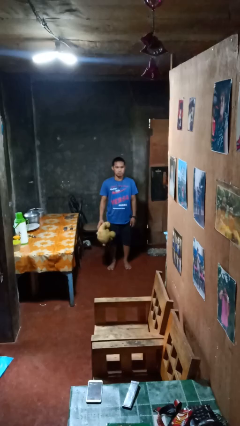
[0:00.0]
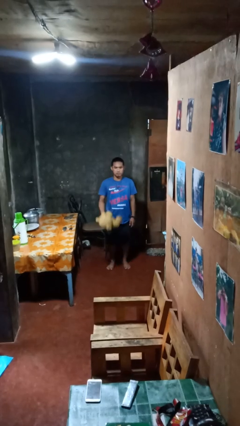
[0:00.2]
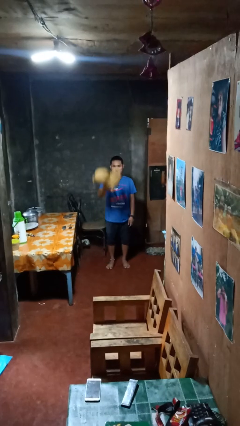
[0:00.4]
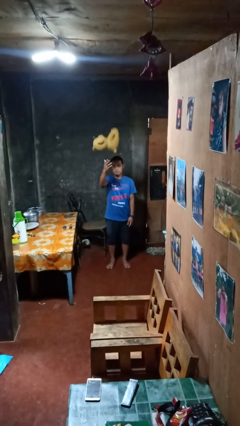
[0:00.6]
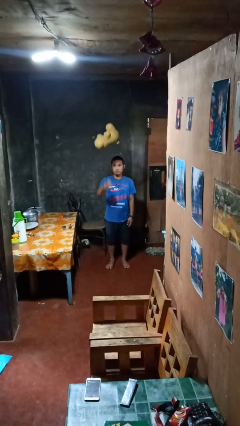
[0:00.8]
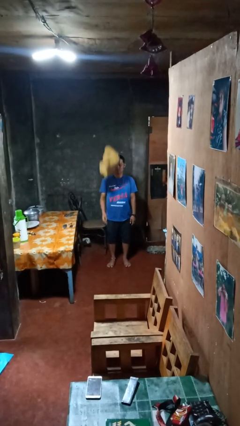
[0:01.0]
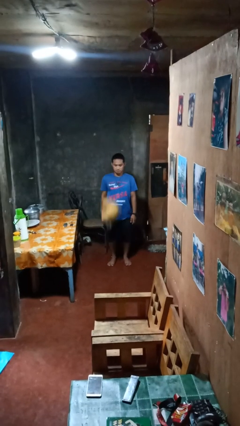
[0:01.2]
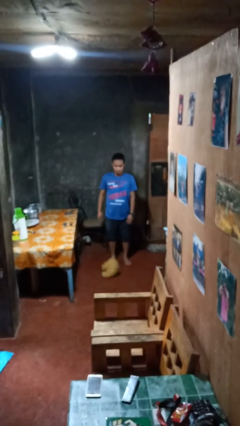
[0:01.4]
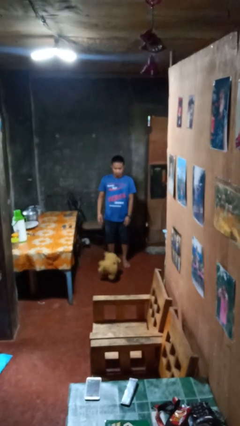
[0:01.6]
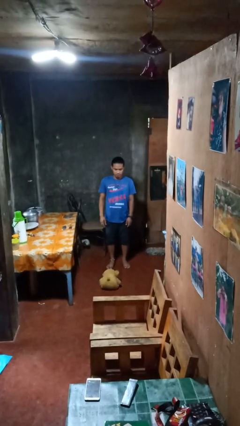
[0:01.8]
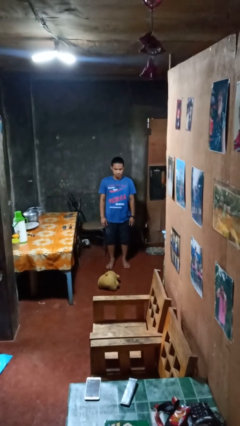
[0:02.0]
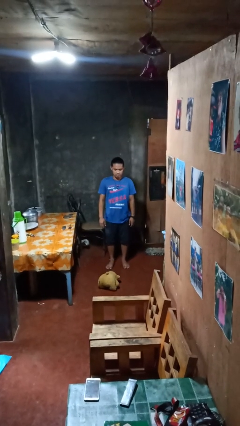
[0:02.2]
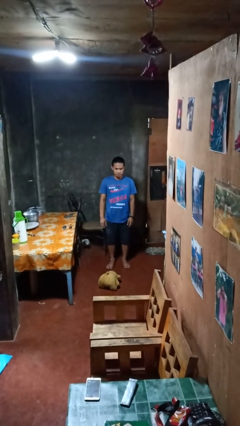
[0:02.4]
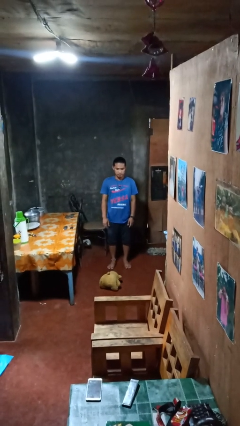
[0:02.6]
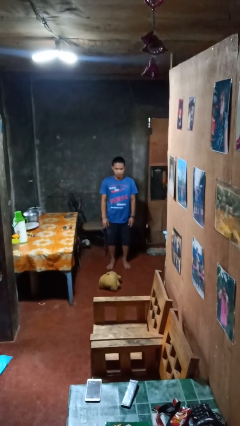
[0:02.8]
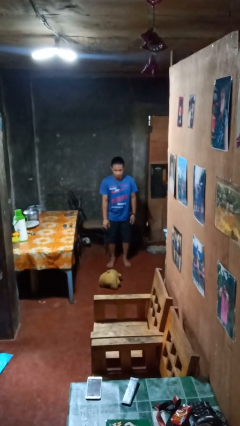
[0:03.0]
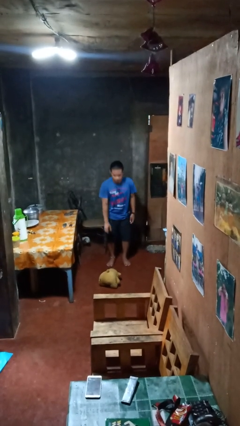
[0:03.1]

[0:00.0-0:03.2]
person throws object into air

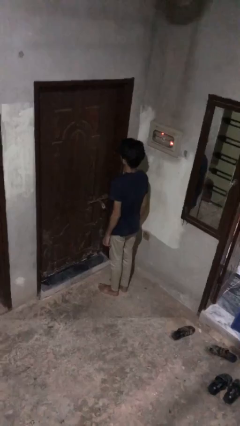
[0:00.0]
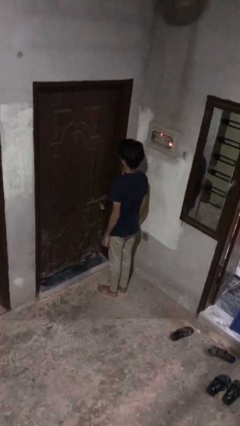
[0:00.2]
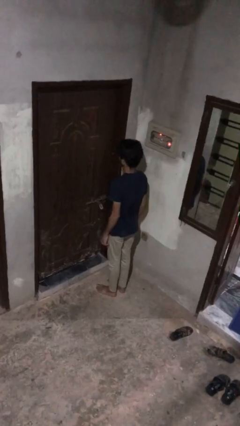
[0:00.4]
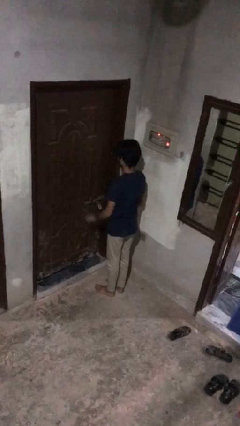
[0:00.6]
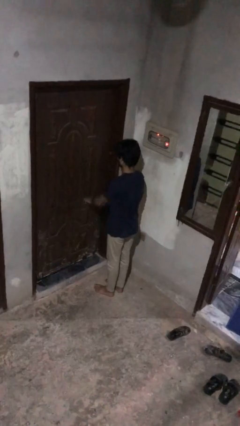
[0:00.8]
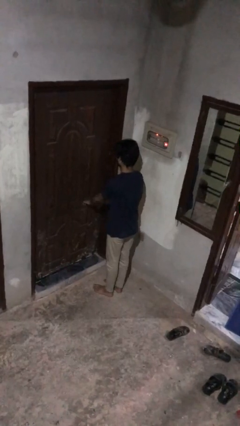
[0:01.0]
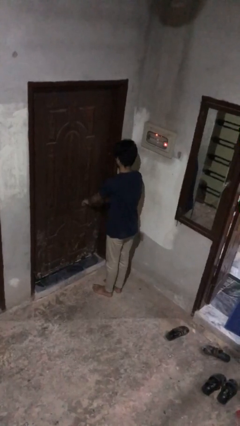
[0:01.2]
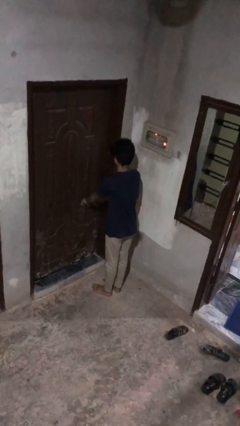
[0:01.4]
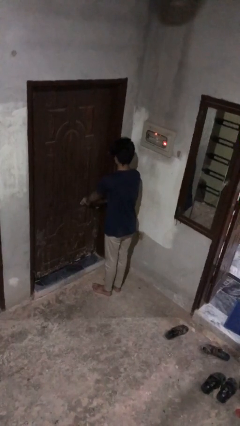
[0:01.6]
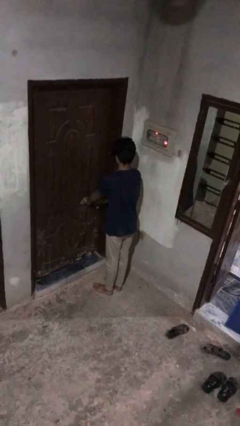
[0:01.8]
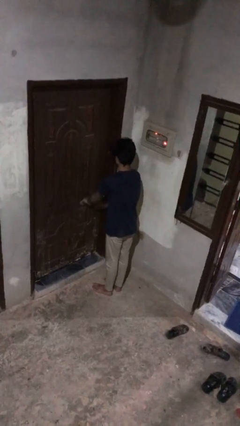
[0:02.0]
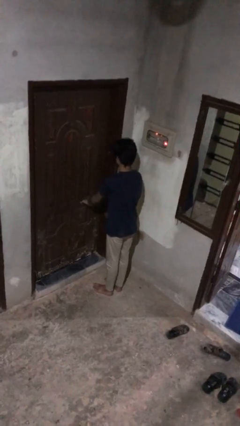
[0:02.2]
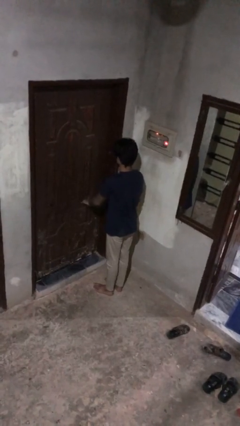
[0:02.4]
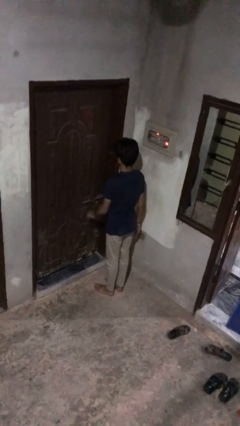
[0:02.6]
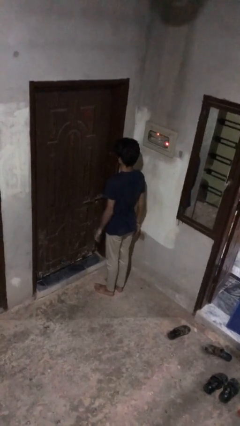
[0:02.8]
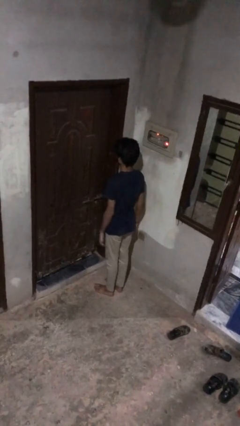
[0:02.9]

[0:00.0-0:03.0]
person unlocks door with keys

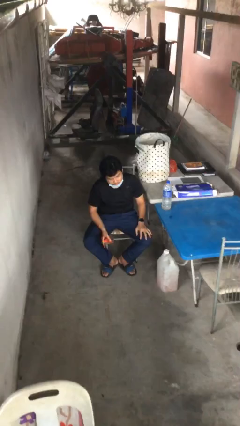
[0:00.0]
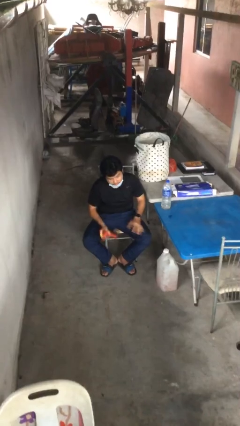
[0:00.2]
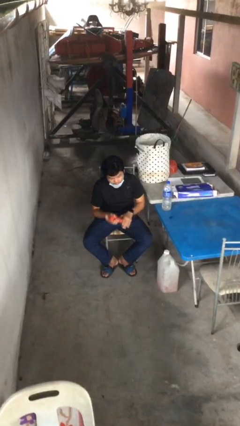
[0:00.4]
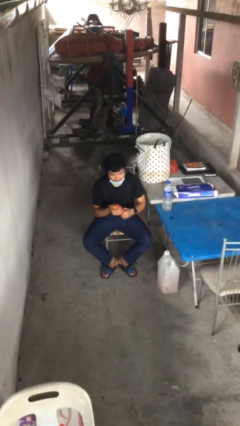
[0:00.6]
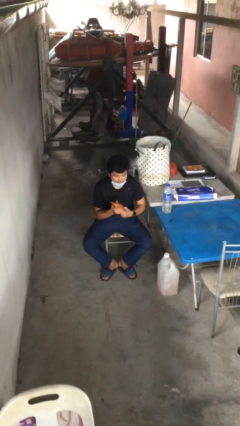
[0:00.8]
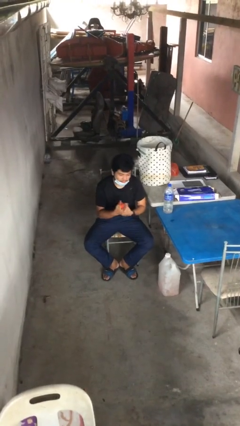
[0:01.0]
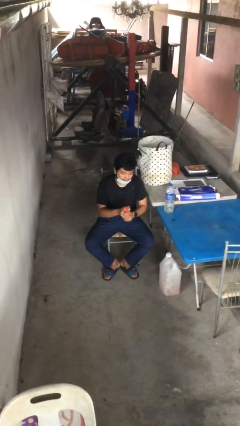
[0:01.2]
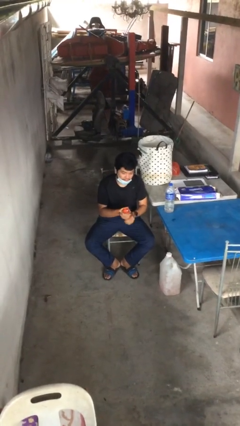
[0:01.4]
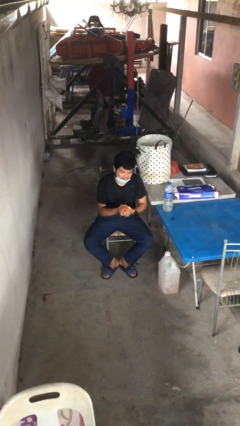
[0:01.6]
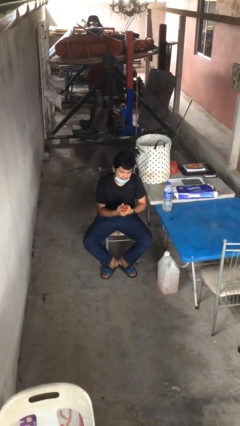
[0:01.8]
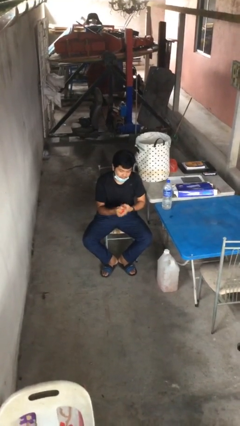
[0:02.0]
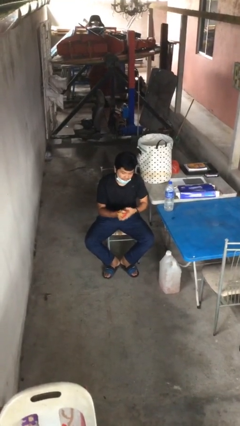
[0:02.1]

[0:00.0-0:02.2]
person squeezes object

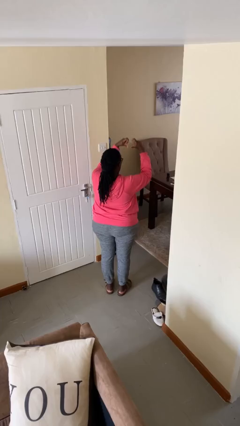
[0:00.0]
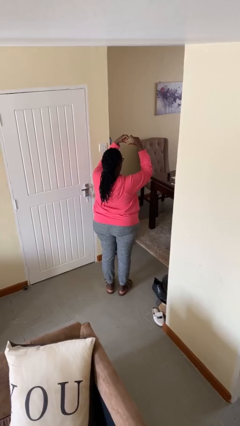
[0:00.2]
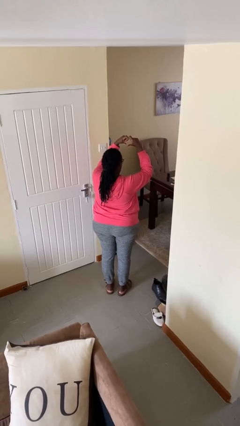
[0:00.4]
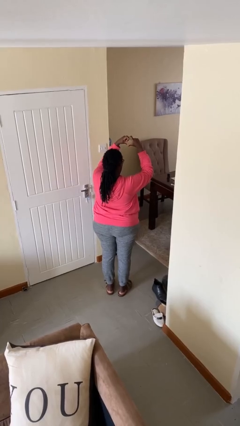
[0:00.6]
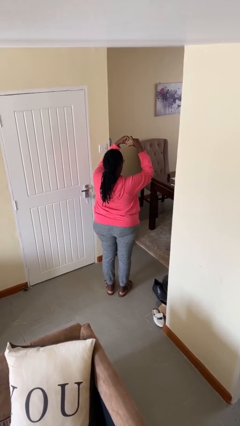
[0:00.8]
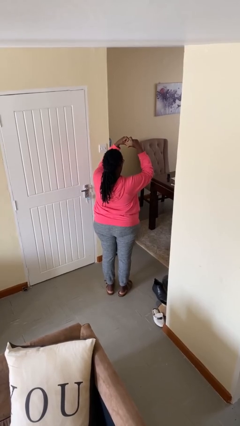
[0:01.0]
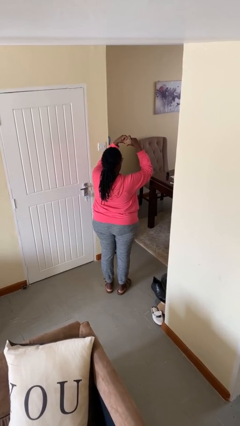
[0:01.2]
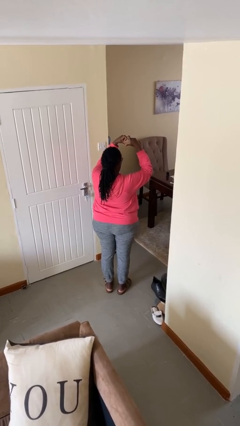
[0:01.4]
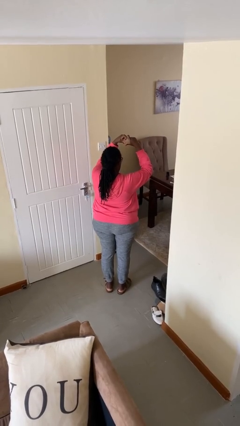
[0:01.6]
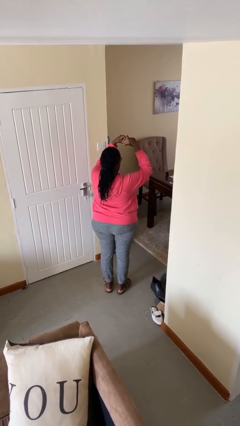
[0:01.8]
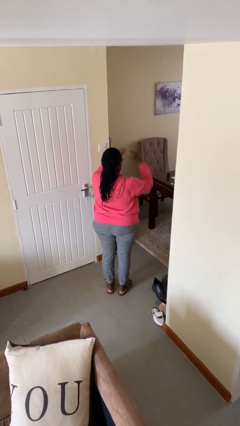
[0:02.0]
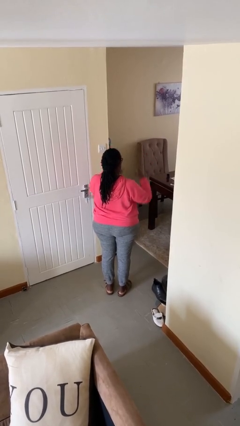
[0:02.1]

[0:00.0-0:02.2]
person gestures heart

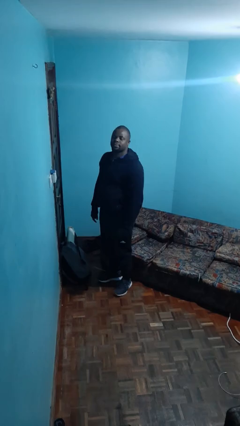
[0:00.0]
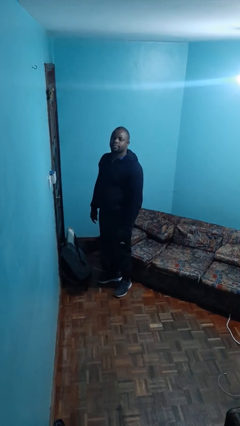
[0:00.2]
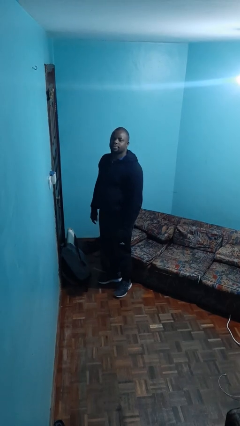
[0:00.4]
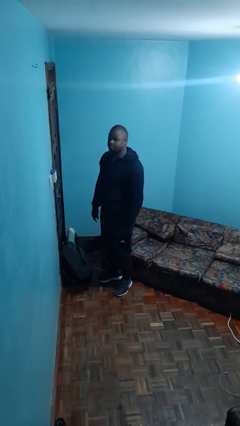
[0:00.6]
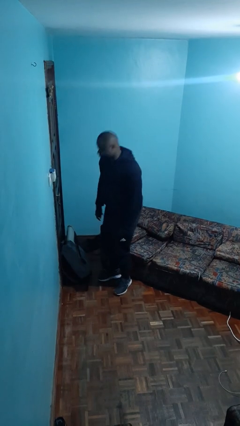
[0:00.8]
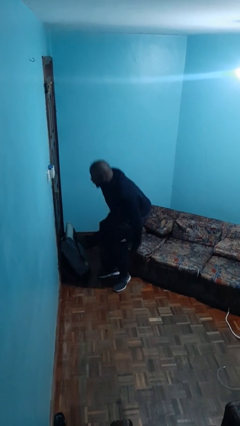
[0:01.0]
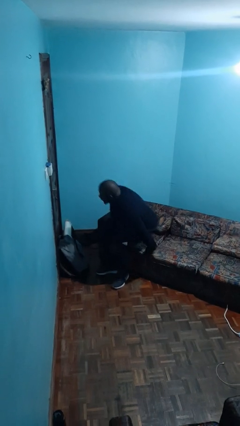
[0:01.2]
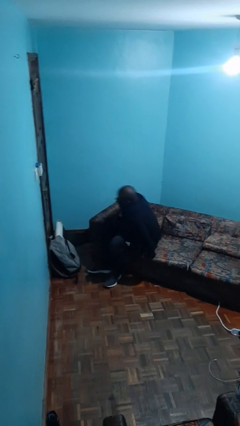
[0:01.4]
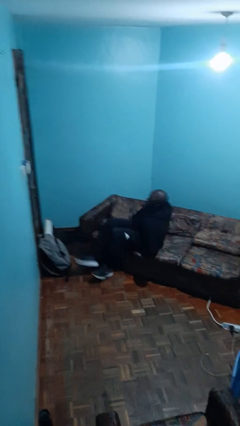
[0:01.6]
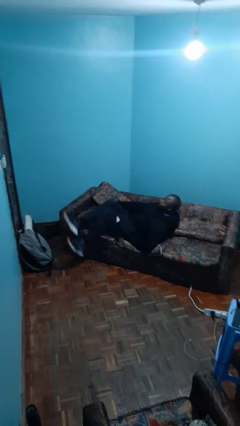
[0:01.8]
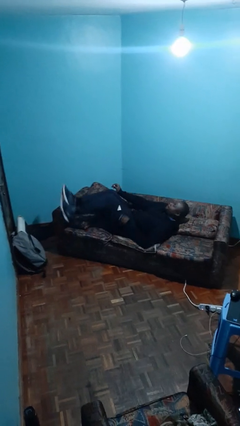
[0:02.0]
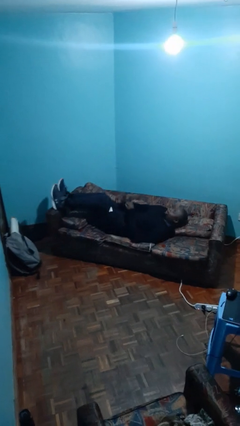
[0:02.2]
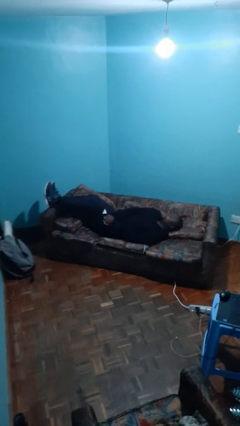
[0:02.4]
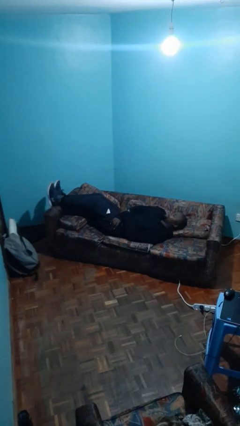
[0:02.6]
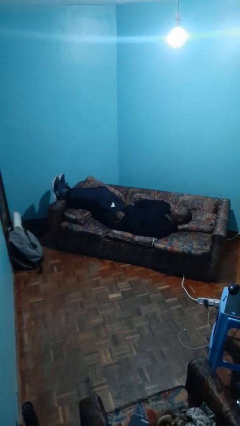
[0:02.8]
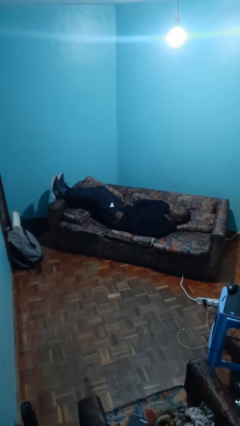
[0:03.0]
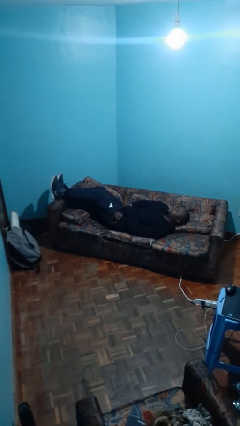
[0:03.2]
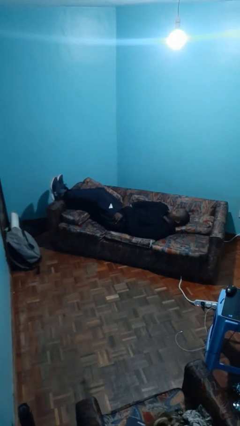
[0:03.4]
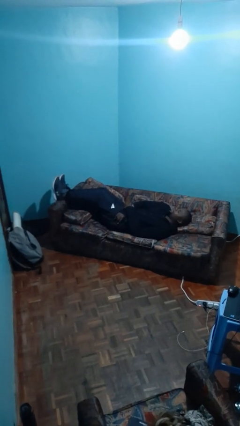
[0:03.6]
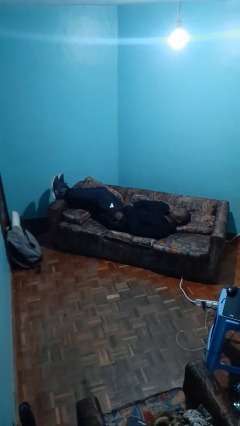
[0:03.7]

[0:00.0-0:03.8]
person lies down on couch

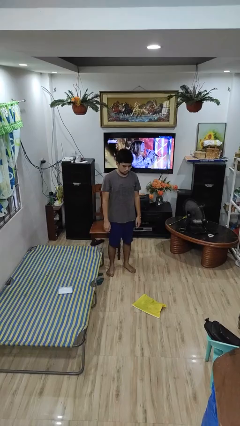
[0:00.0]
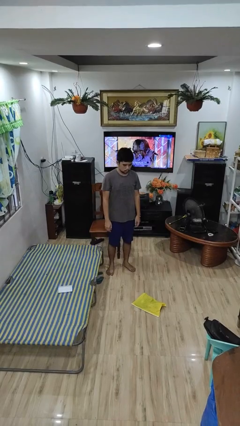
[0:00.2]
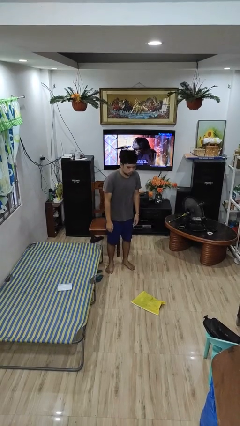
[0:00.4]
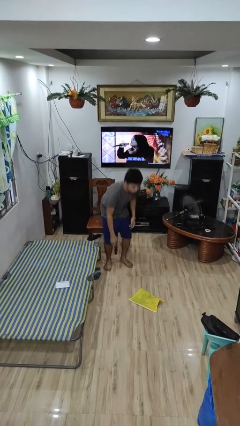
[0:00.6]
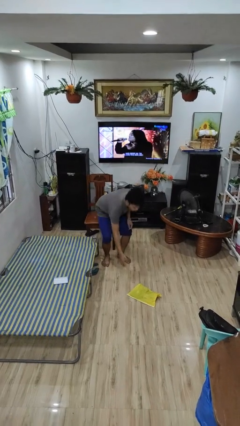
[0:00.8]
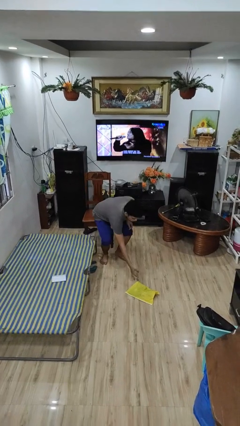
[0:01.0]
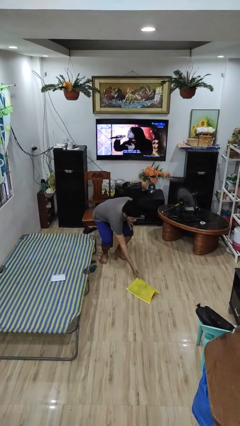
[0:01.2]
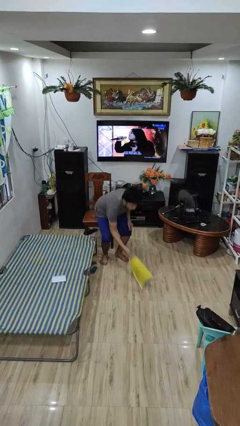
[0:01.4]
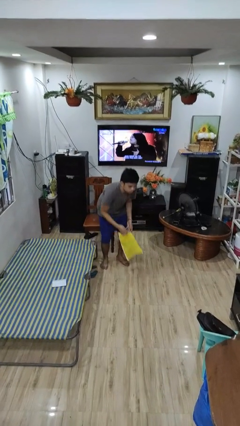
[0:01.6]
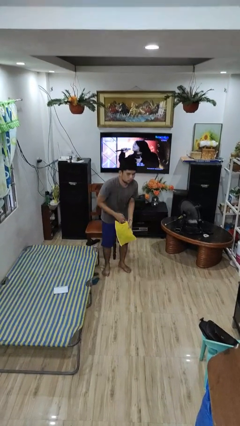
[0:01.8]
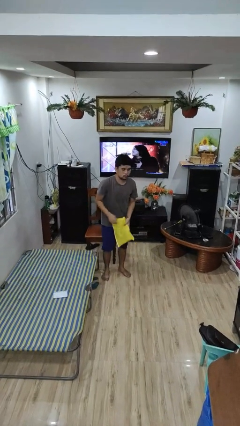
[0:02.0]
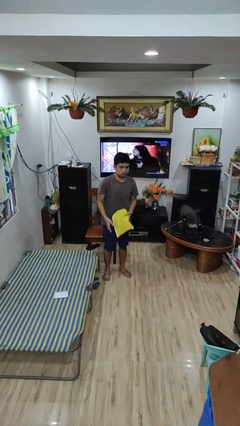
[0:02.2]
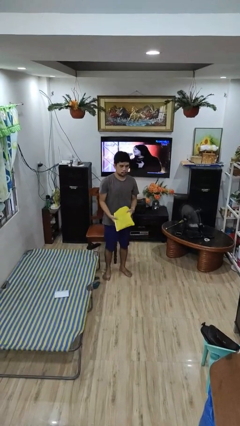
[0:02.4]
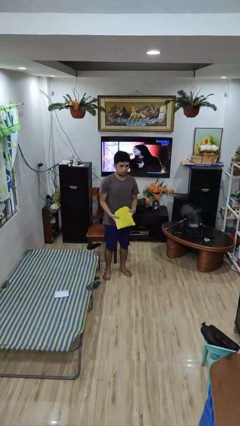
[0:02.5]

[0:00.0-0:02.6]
person picks up object from floor

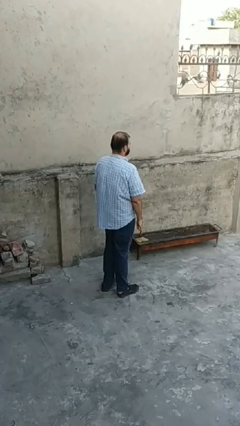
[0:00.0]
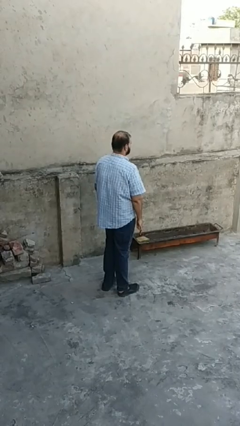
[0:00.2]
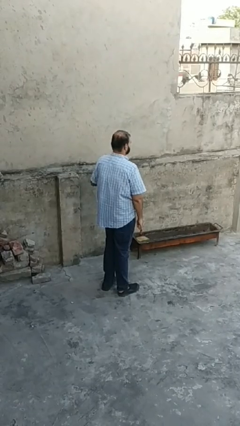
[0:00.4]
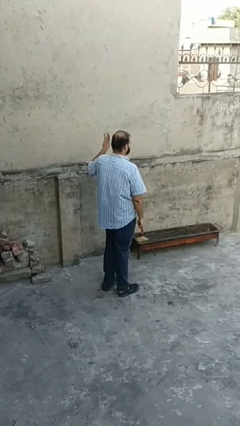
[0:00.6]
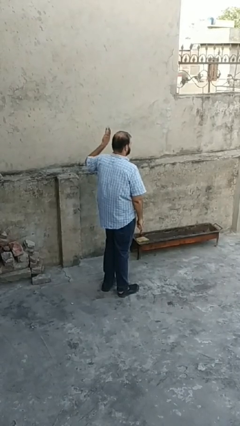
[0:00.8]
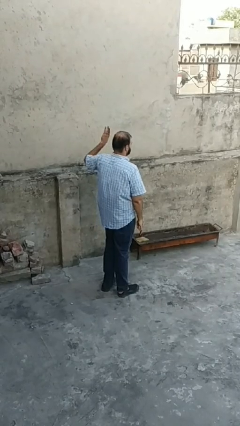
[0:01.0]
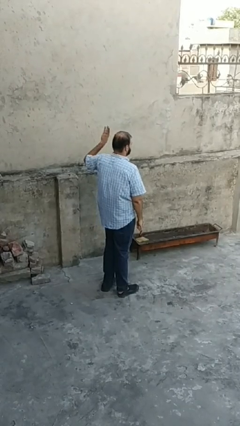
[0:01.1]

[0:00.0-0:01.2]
person gestures number three
